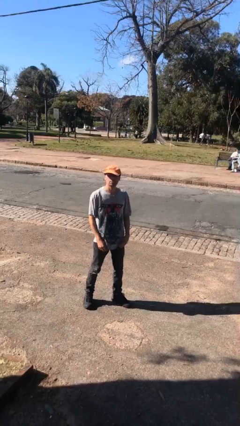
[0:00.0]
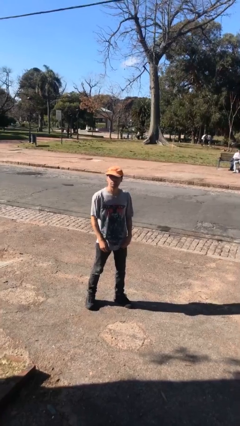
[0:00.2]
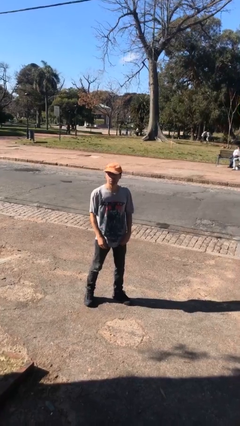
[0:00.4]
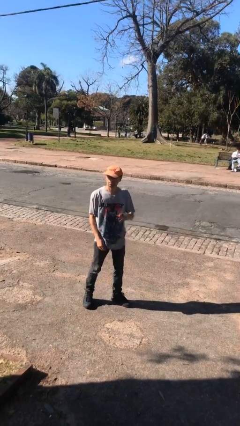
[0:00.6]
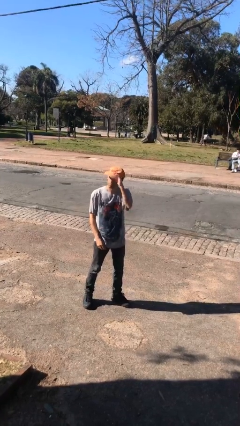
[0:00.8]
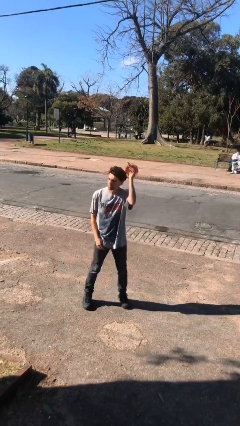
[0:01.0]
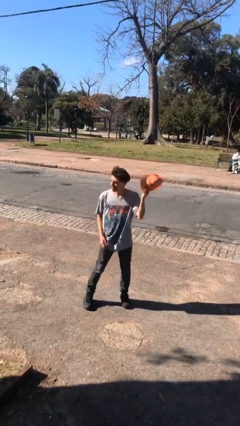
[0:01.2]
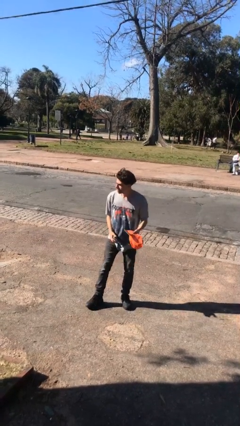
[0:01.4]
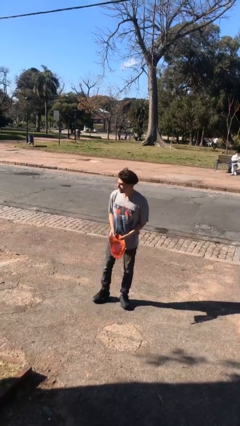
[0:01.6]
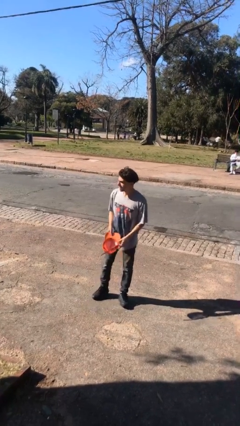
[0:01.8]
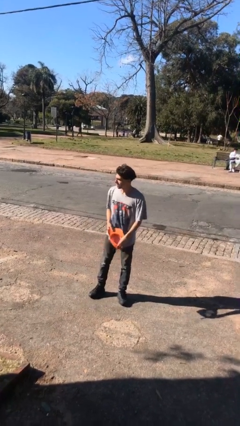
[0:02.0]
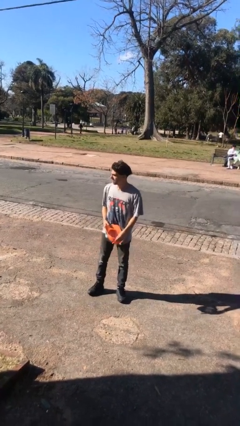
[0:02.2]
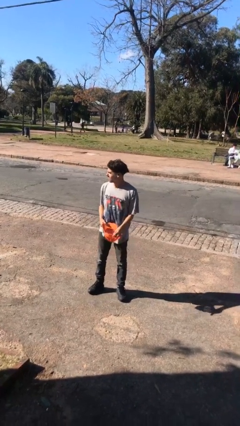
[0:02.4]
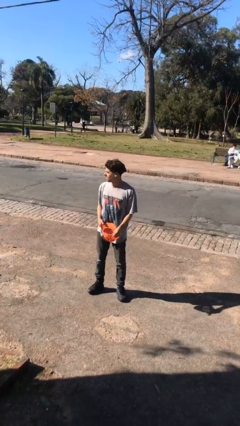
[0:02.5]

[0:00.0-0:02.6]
person takes off hat

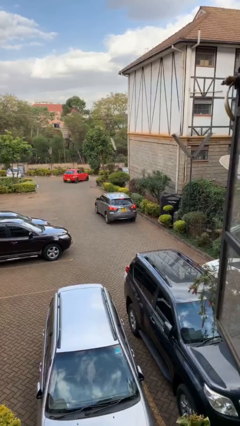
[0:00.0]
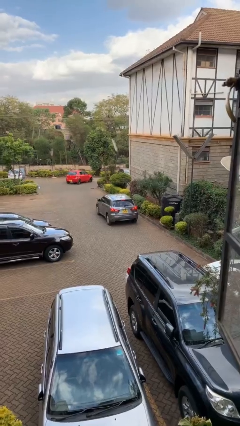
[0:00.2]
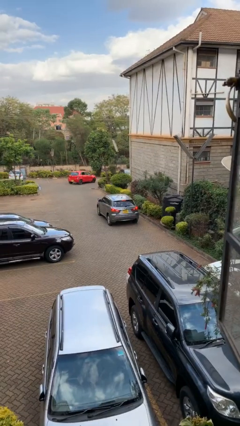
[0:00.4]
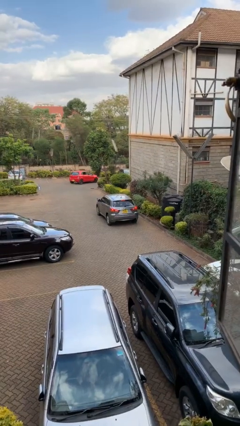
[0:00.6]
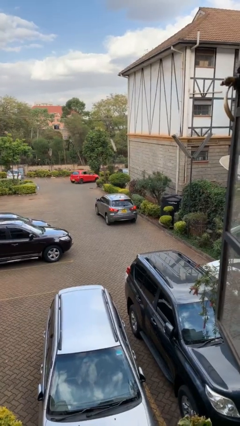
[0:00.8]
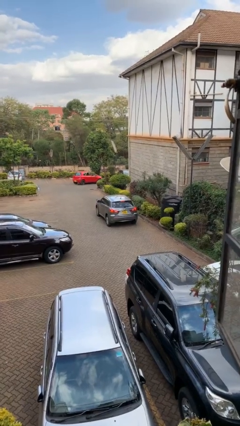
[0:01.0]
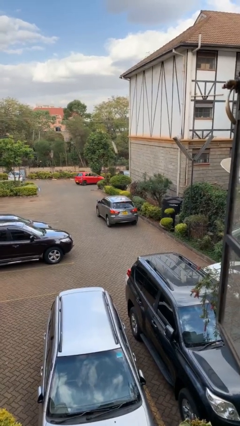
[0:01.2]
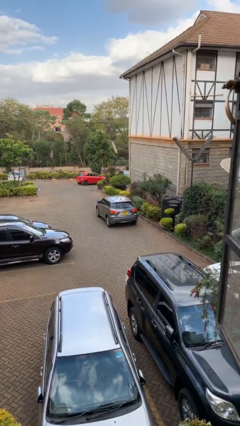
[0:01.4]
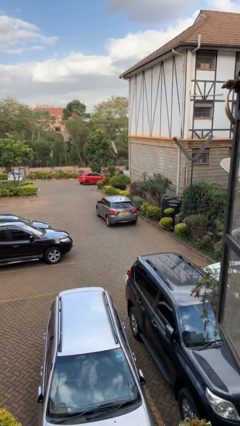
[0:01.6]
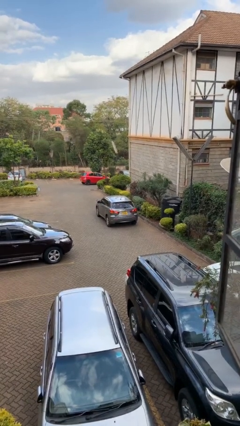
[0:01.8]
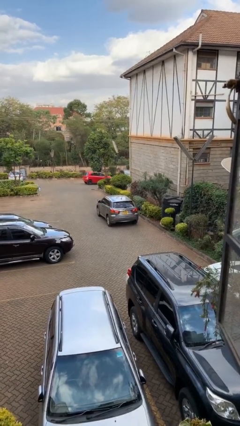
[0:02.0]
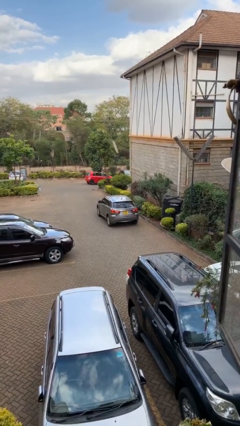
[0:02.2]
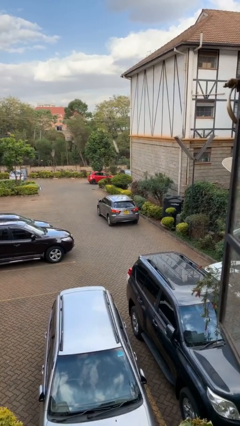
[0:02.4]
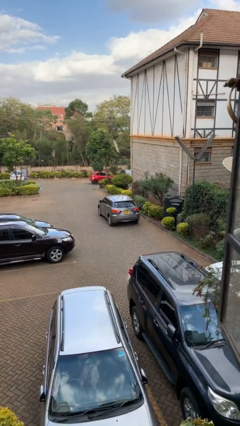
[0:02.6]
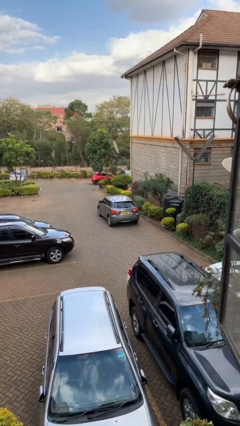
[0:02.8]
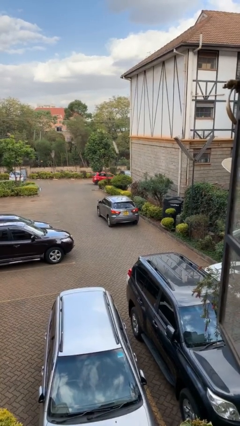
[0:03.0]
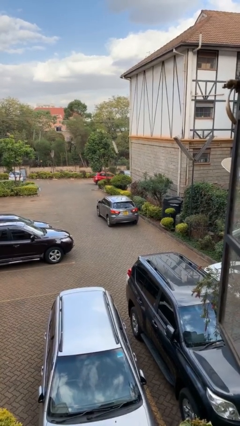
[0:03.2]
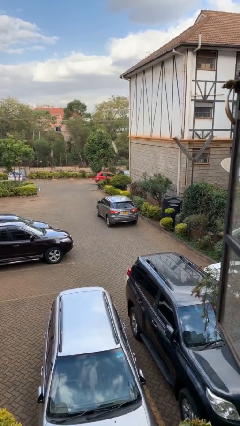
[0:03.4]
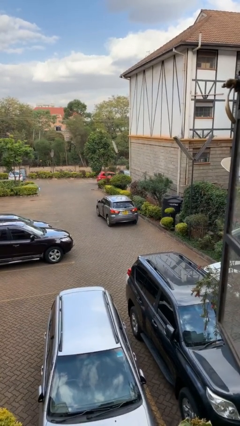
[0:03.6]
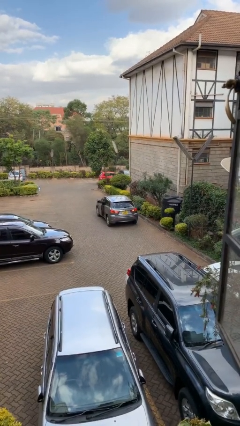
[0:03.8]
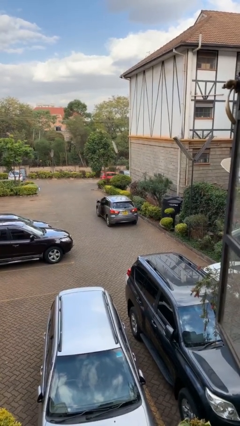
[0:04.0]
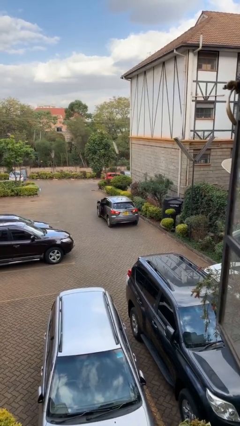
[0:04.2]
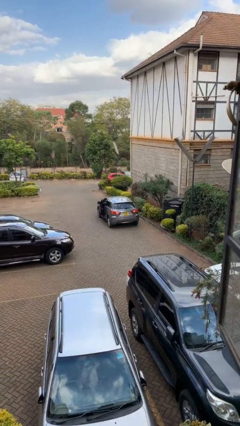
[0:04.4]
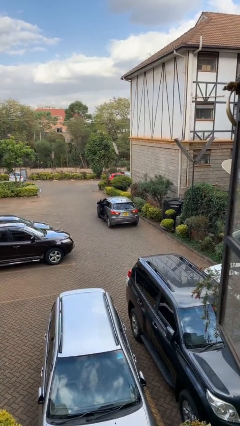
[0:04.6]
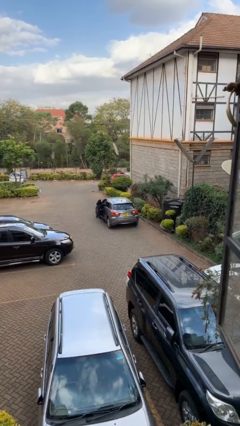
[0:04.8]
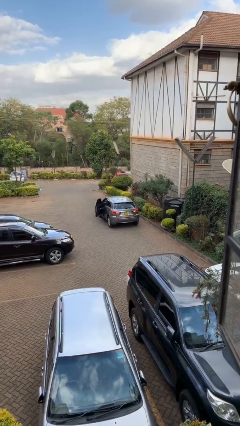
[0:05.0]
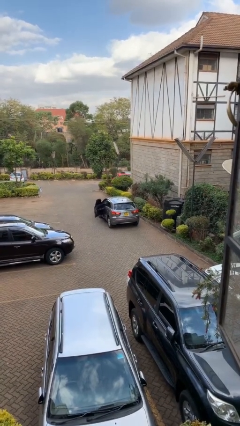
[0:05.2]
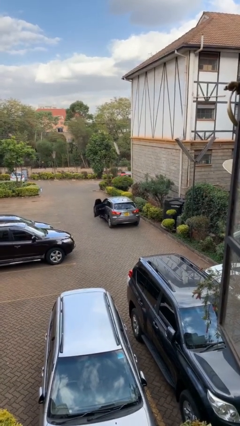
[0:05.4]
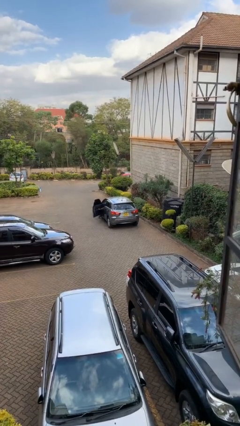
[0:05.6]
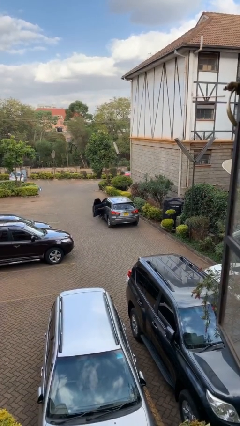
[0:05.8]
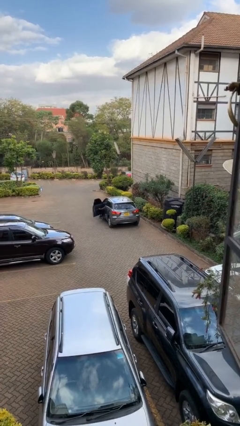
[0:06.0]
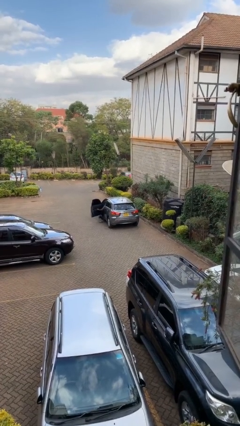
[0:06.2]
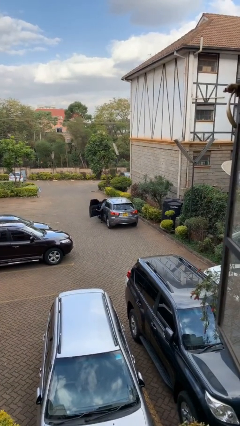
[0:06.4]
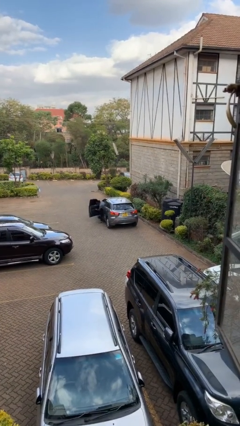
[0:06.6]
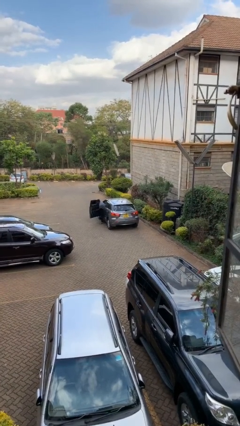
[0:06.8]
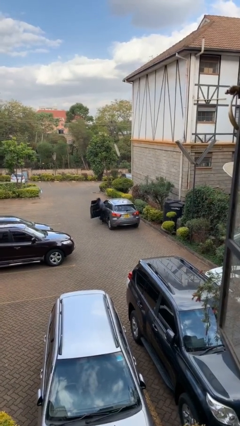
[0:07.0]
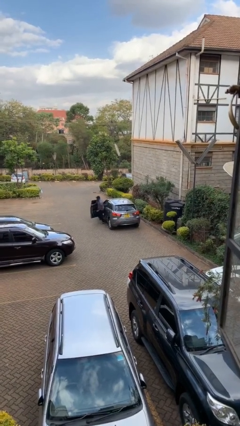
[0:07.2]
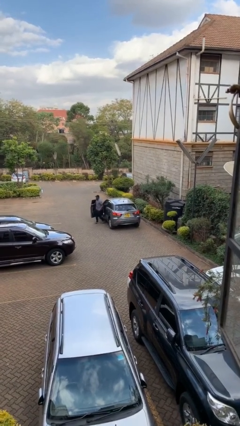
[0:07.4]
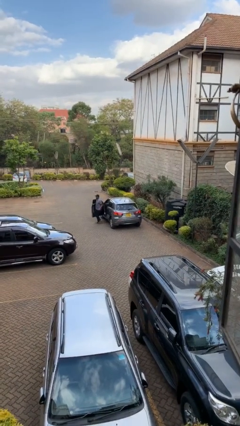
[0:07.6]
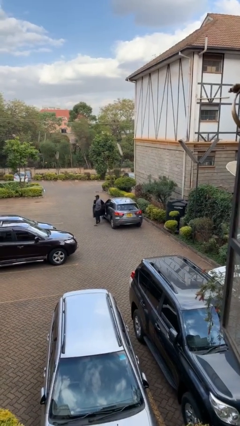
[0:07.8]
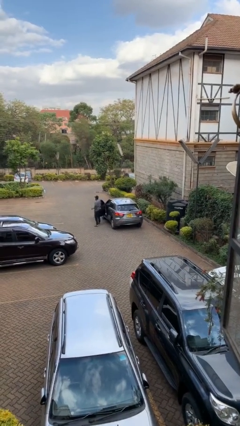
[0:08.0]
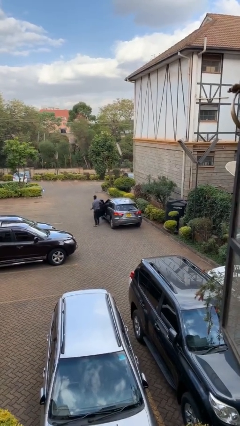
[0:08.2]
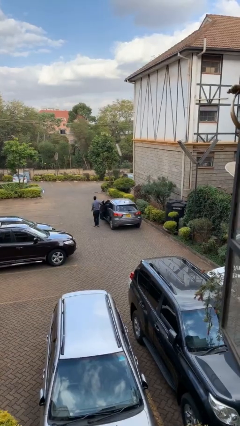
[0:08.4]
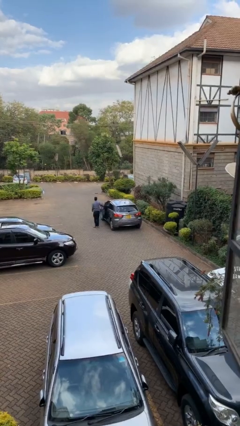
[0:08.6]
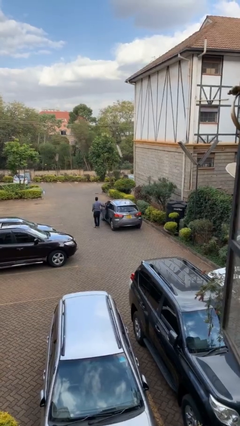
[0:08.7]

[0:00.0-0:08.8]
car drops off person

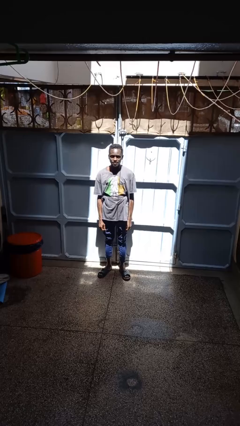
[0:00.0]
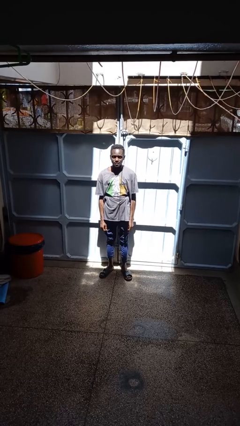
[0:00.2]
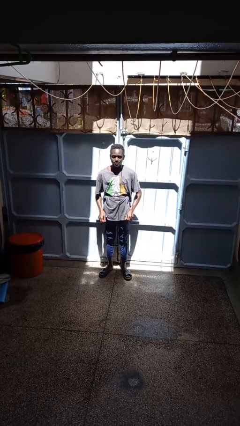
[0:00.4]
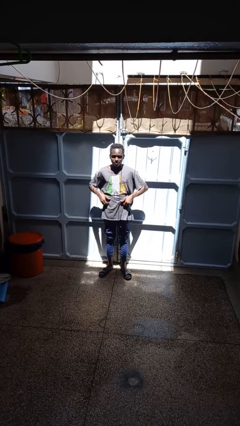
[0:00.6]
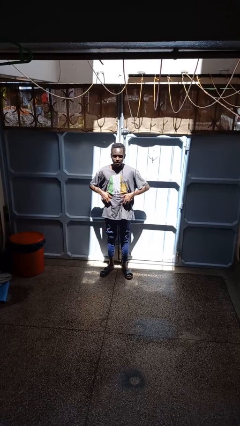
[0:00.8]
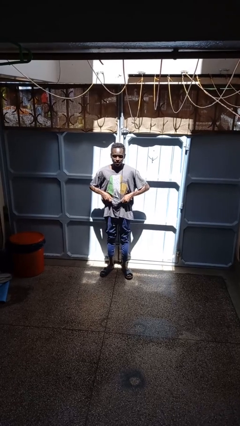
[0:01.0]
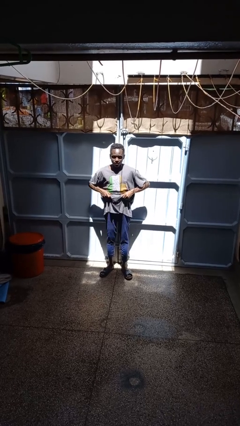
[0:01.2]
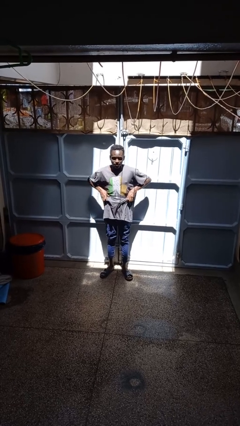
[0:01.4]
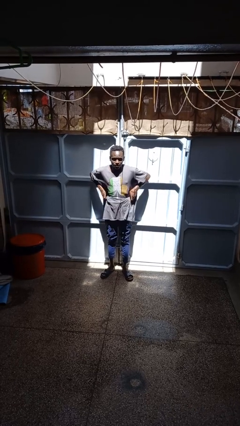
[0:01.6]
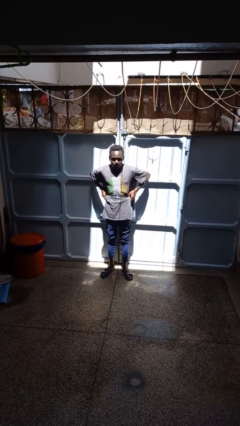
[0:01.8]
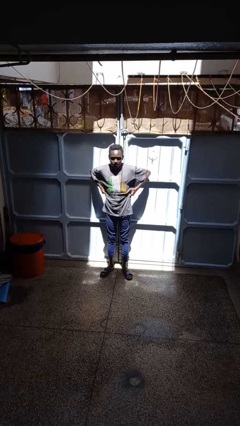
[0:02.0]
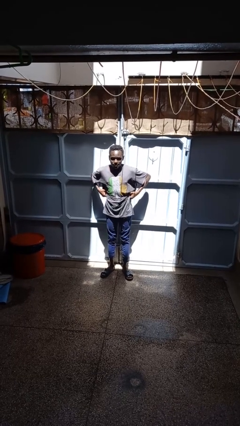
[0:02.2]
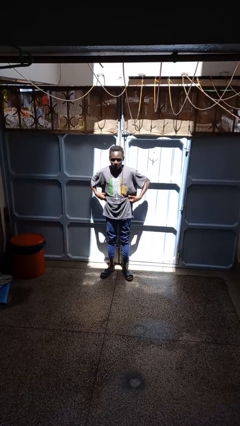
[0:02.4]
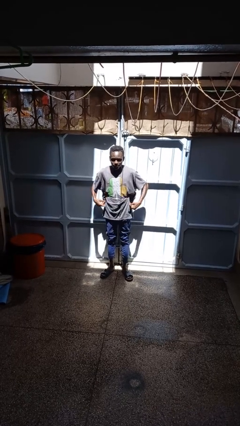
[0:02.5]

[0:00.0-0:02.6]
person hikes up pants

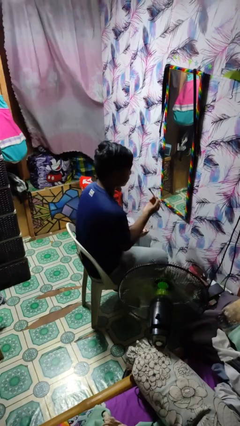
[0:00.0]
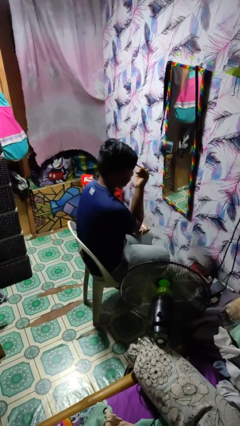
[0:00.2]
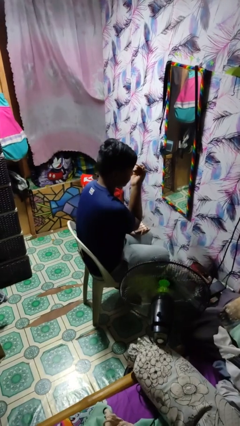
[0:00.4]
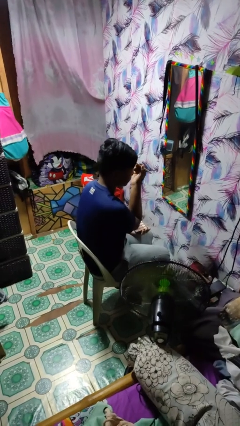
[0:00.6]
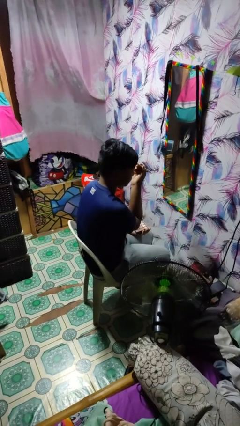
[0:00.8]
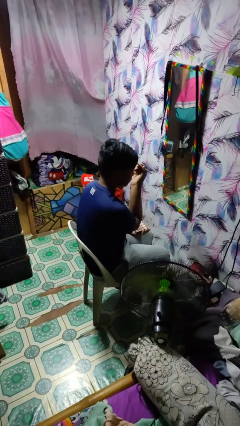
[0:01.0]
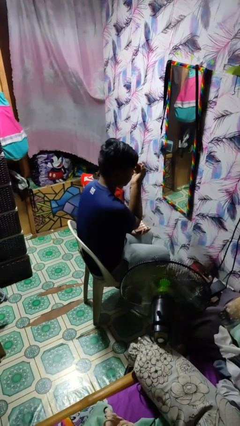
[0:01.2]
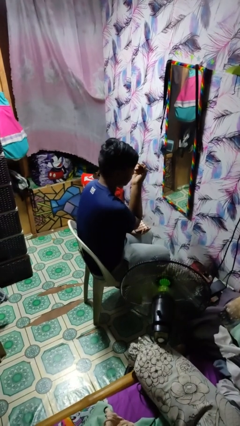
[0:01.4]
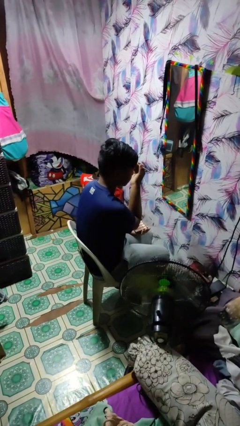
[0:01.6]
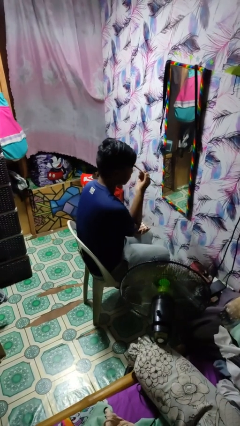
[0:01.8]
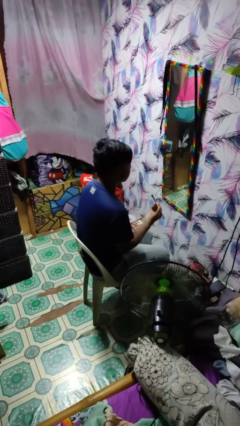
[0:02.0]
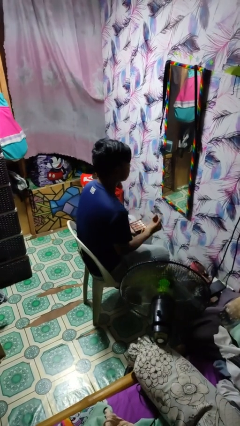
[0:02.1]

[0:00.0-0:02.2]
person applies eye makeup

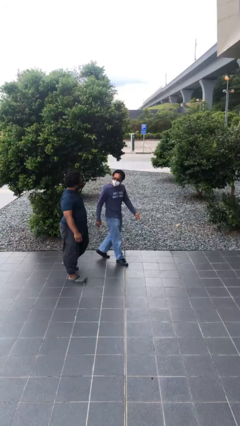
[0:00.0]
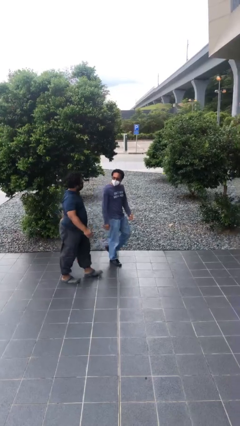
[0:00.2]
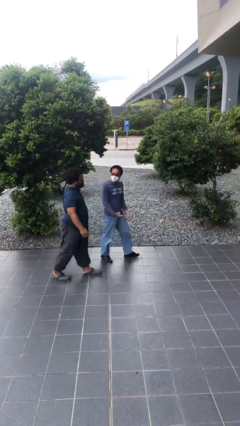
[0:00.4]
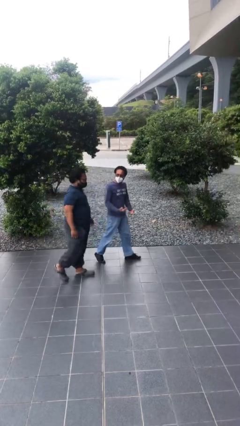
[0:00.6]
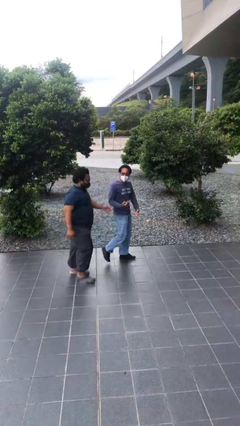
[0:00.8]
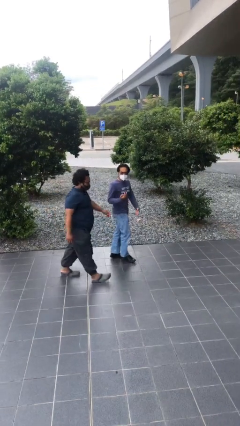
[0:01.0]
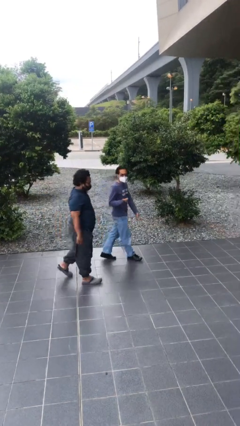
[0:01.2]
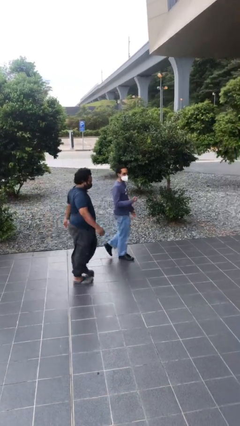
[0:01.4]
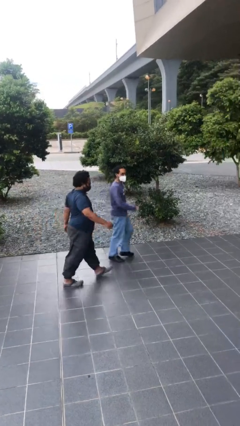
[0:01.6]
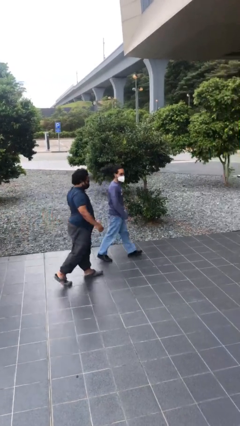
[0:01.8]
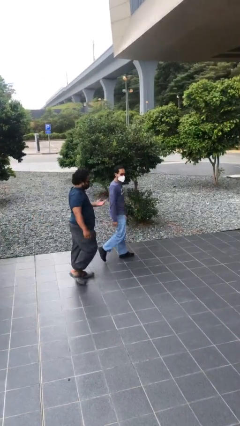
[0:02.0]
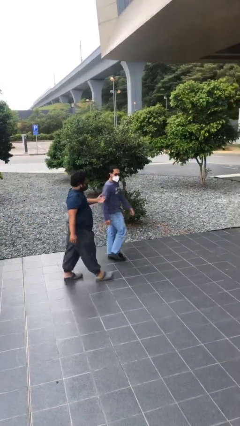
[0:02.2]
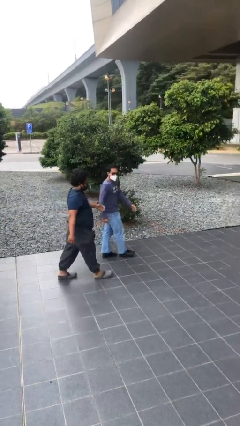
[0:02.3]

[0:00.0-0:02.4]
person talks to person
